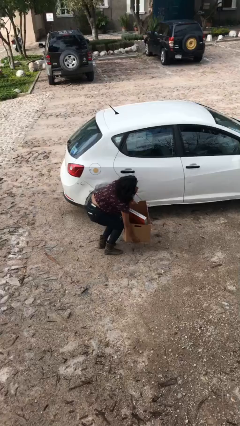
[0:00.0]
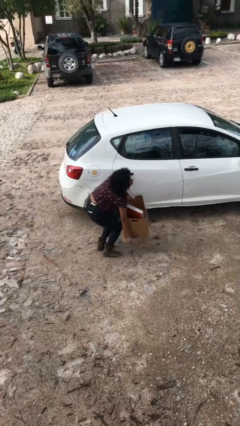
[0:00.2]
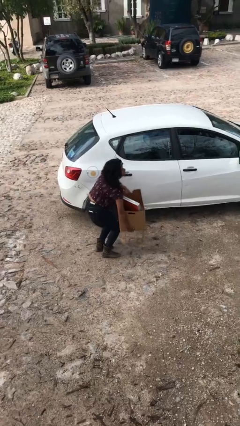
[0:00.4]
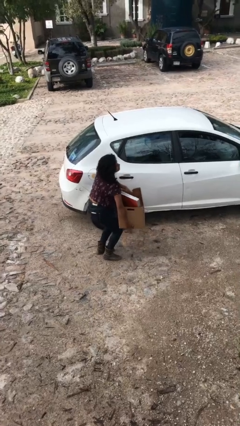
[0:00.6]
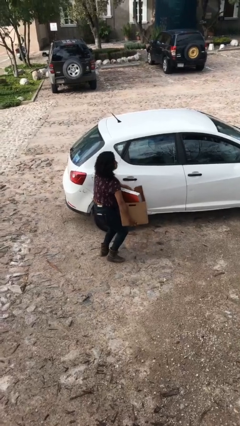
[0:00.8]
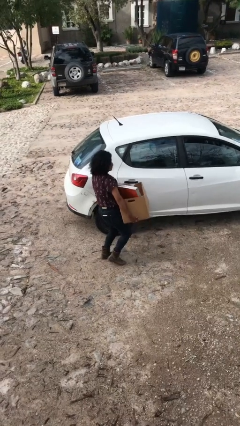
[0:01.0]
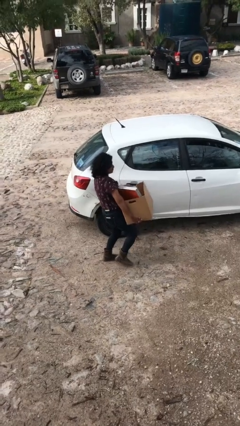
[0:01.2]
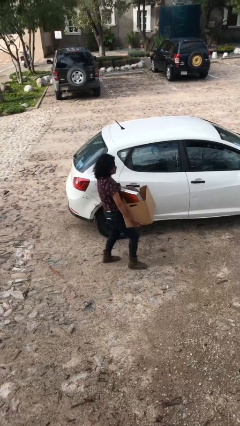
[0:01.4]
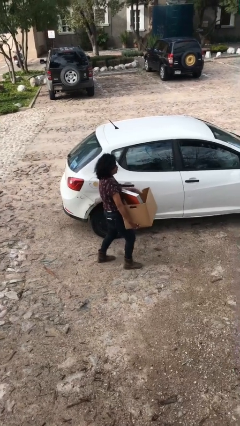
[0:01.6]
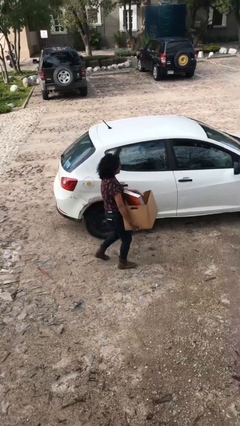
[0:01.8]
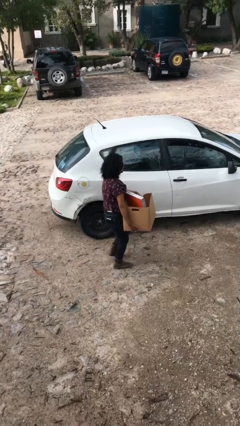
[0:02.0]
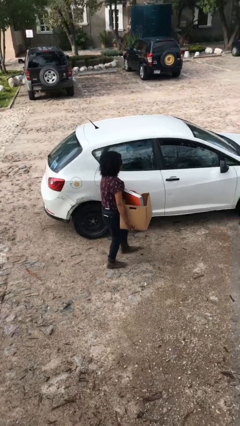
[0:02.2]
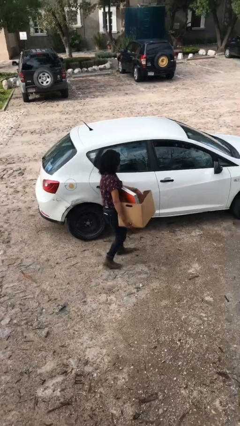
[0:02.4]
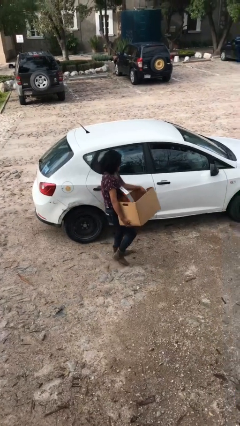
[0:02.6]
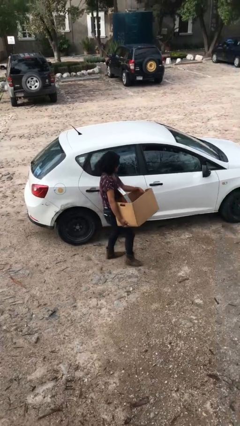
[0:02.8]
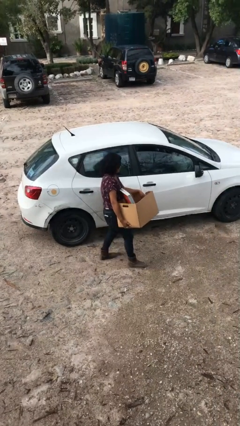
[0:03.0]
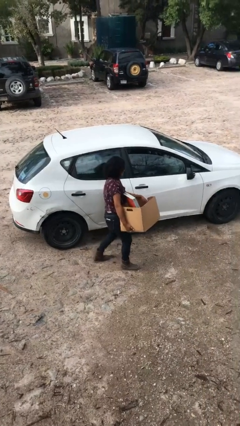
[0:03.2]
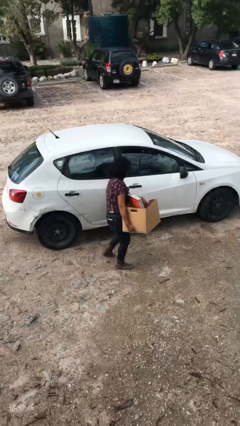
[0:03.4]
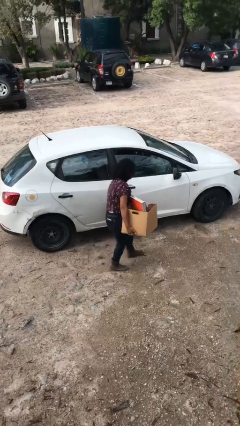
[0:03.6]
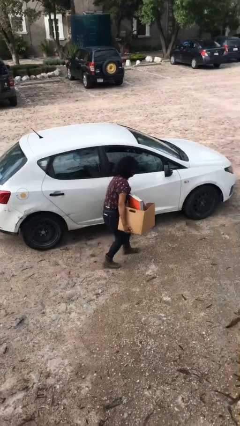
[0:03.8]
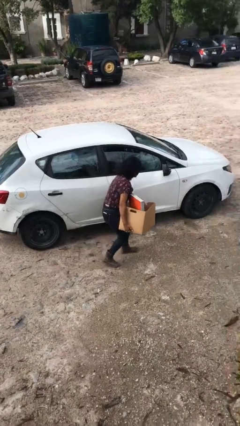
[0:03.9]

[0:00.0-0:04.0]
person carries heavy object

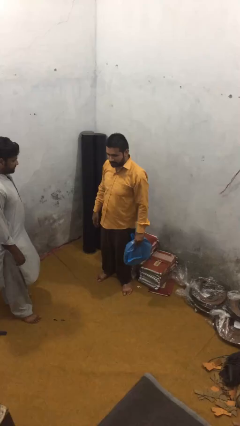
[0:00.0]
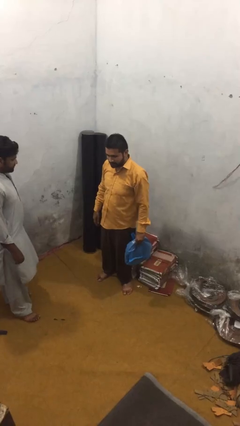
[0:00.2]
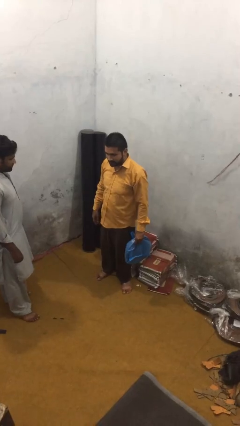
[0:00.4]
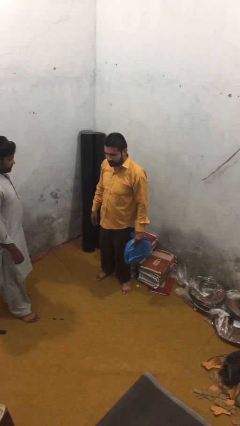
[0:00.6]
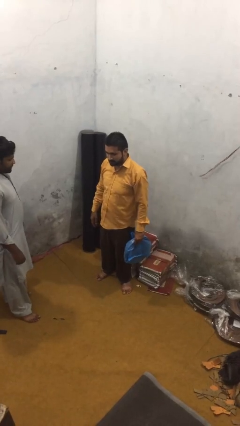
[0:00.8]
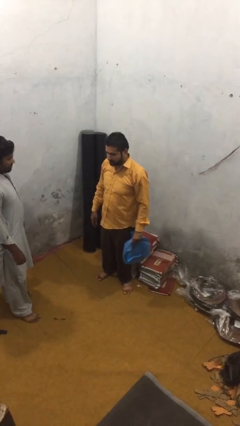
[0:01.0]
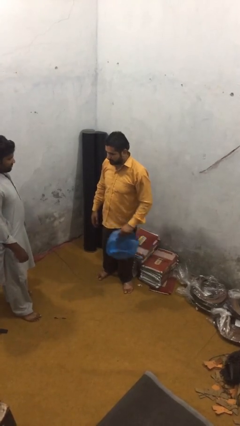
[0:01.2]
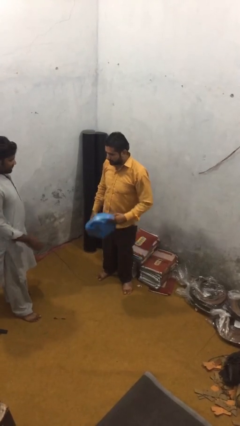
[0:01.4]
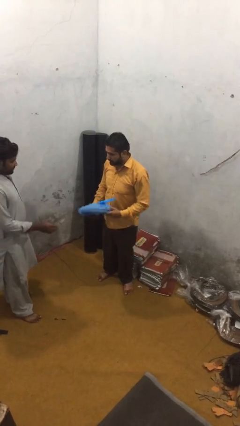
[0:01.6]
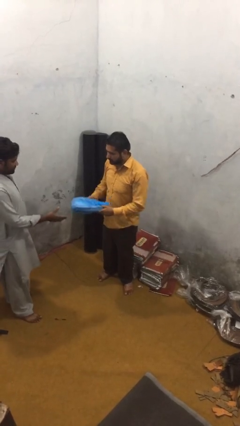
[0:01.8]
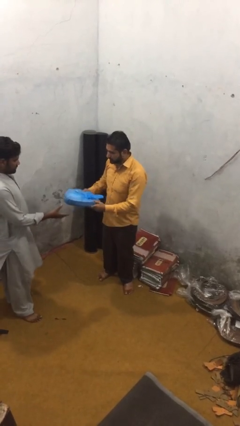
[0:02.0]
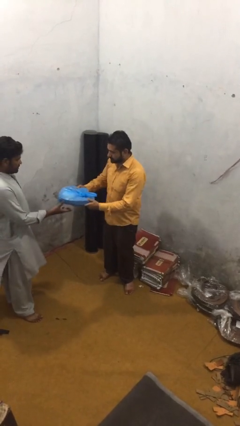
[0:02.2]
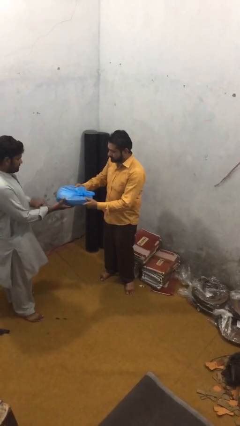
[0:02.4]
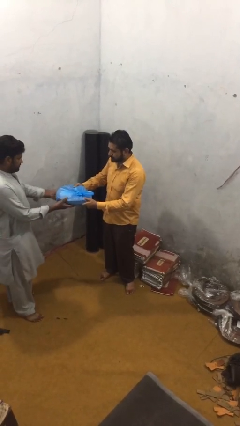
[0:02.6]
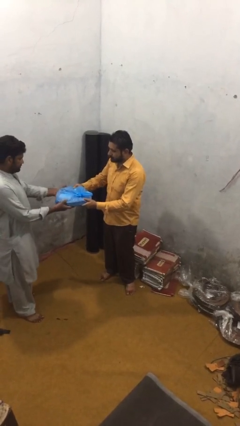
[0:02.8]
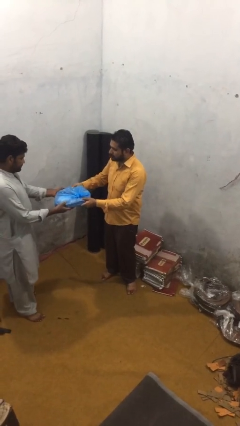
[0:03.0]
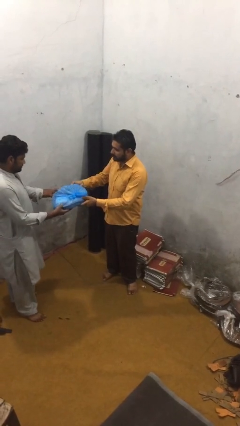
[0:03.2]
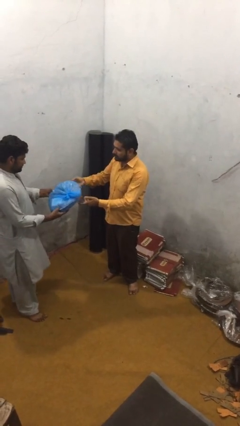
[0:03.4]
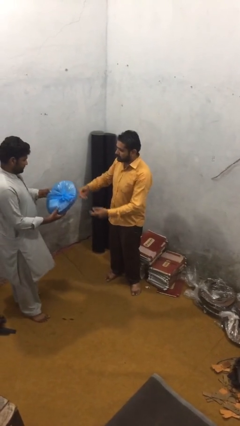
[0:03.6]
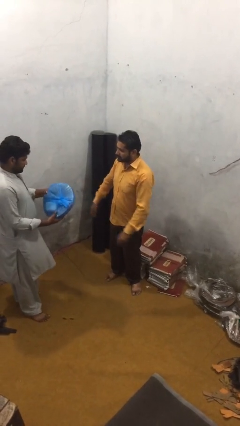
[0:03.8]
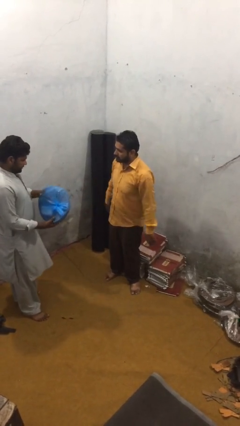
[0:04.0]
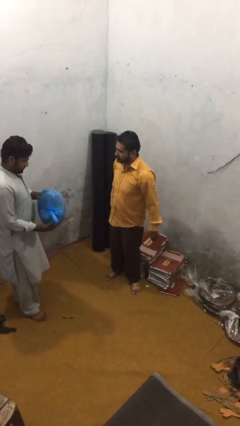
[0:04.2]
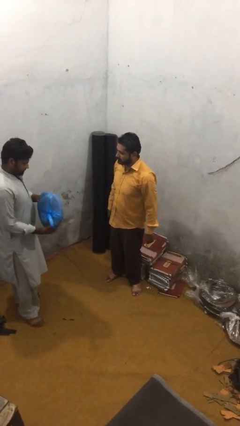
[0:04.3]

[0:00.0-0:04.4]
person transfers object to person

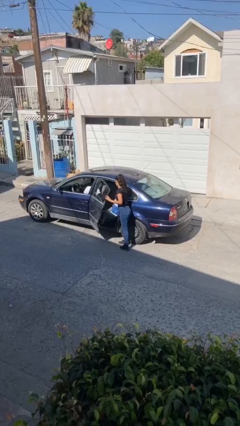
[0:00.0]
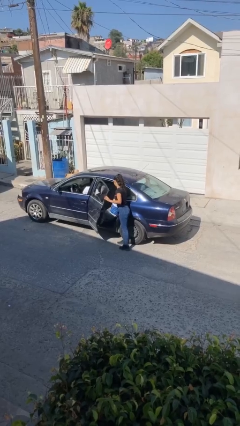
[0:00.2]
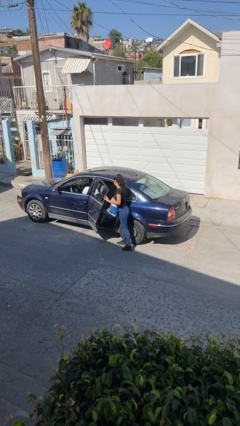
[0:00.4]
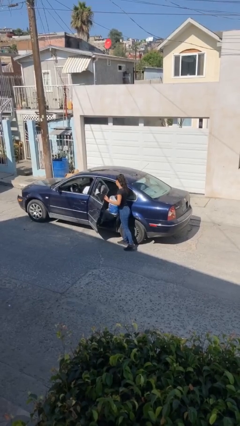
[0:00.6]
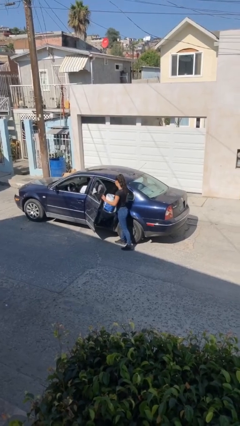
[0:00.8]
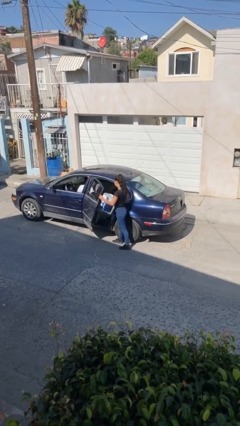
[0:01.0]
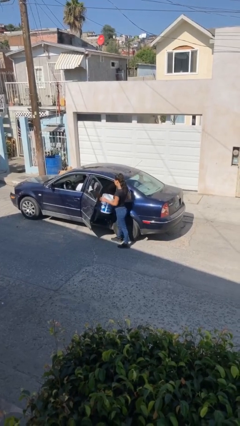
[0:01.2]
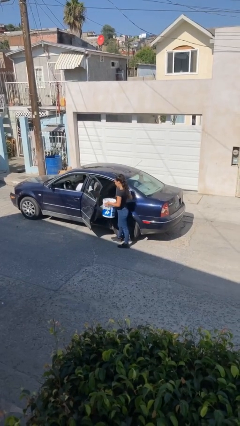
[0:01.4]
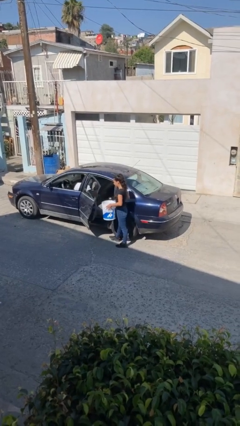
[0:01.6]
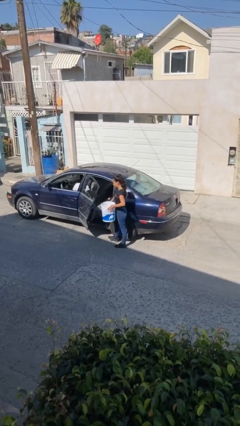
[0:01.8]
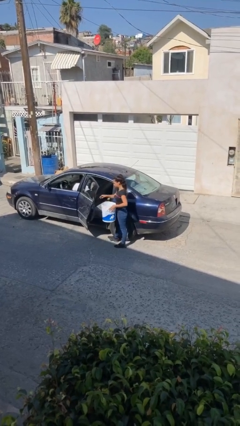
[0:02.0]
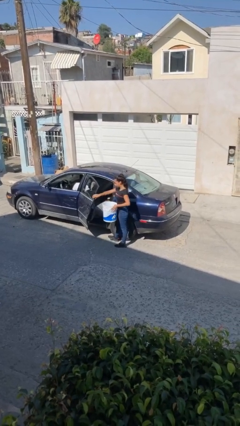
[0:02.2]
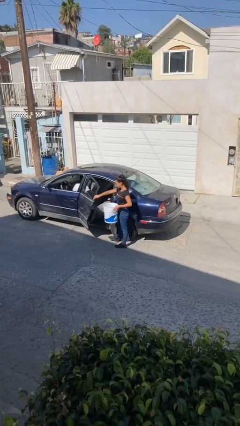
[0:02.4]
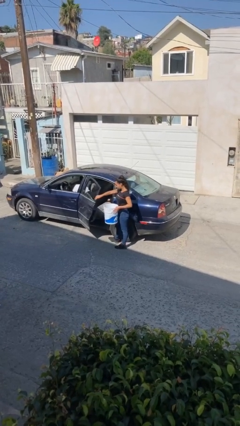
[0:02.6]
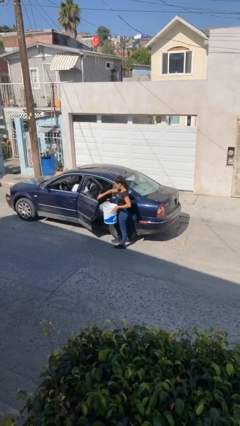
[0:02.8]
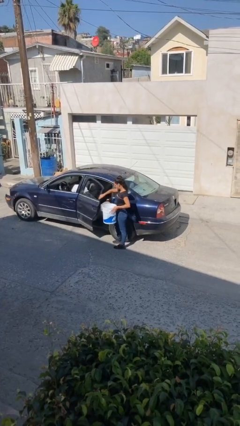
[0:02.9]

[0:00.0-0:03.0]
person unloads car

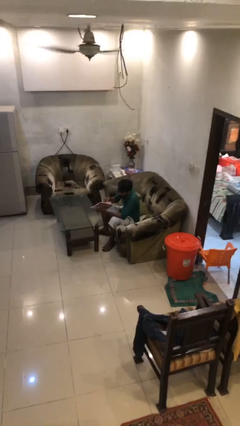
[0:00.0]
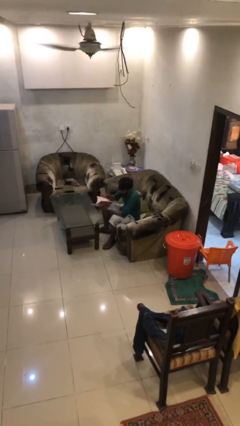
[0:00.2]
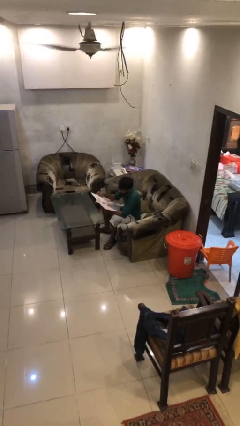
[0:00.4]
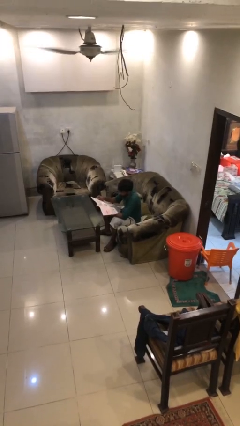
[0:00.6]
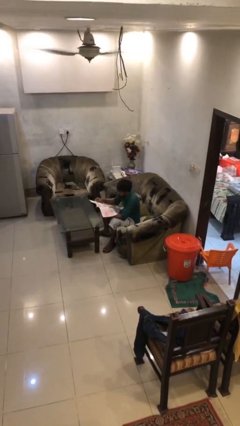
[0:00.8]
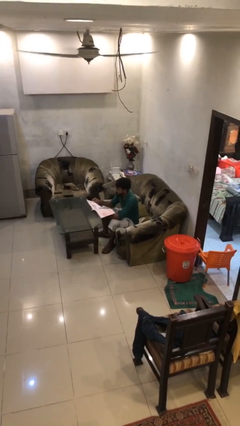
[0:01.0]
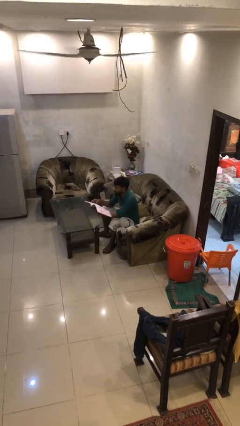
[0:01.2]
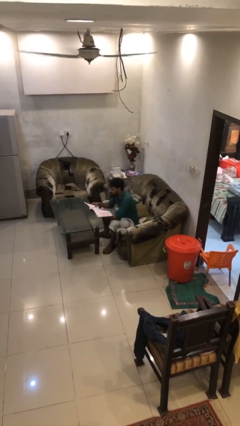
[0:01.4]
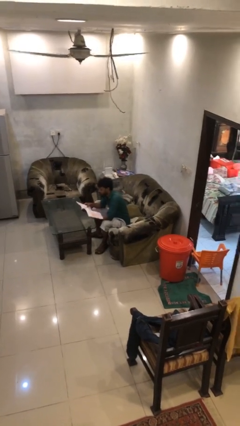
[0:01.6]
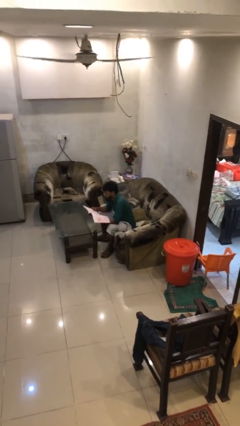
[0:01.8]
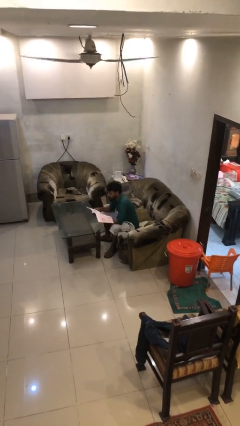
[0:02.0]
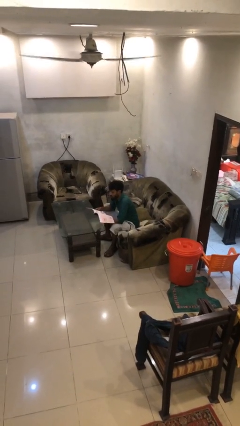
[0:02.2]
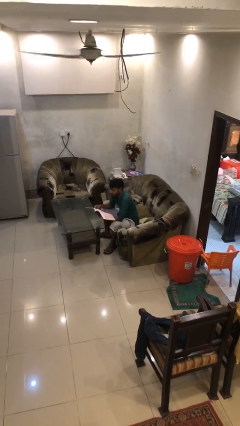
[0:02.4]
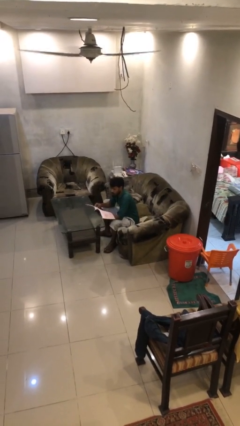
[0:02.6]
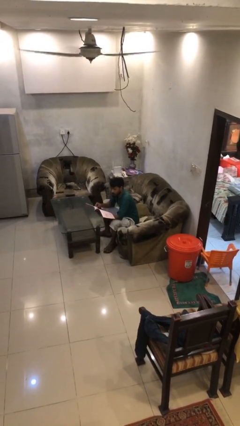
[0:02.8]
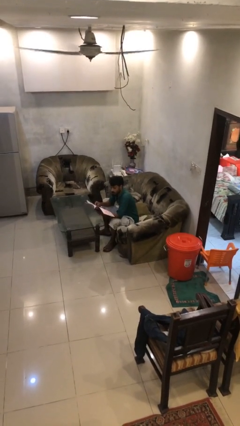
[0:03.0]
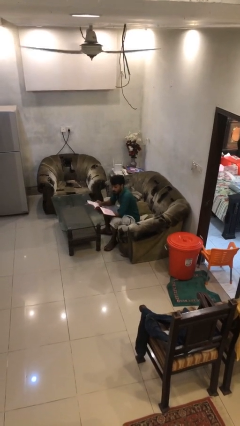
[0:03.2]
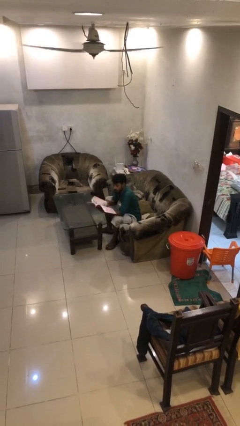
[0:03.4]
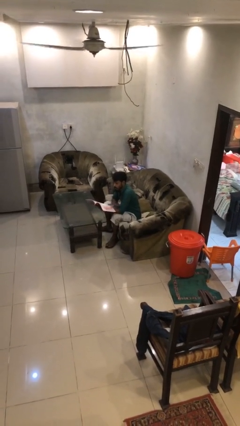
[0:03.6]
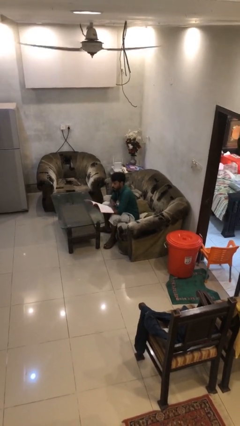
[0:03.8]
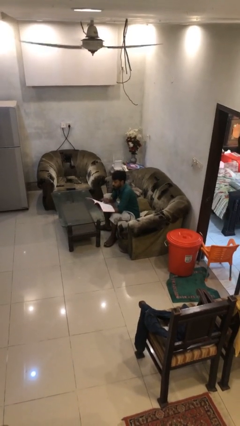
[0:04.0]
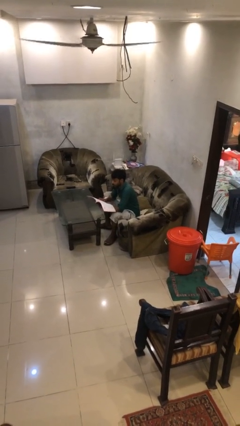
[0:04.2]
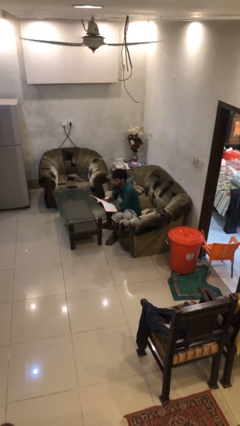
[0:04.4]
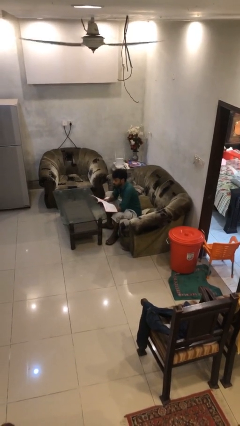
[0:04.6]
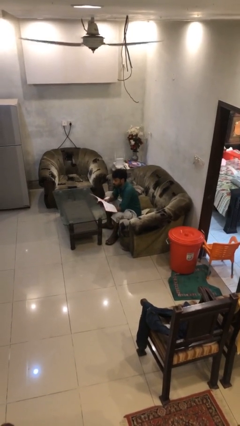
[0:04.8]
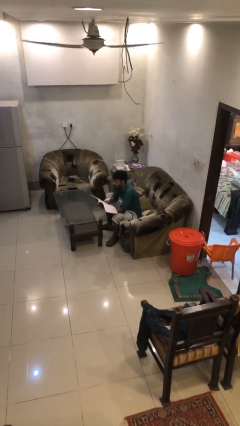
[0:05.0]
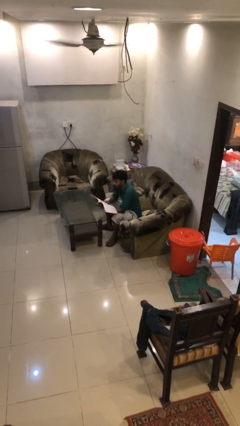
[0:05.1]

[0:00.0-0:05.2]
person reads document

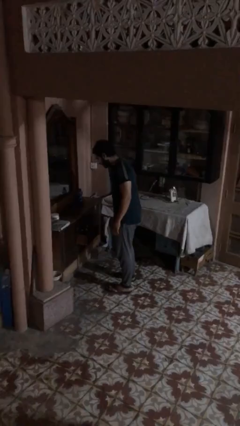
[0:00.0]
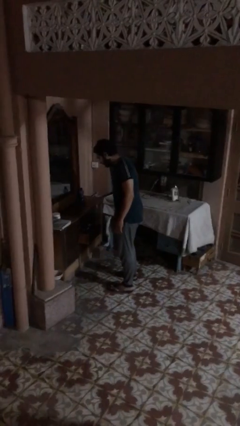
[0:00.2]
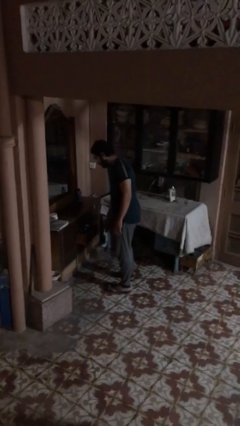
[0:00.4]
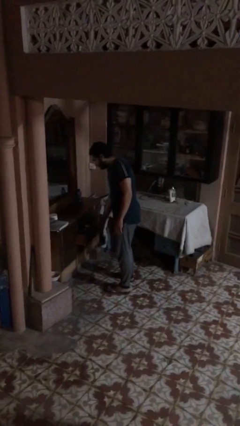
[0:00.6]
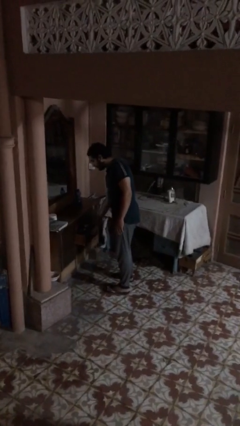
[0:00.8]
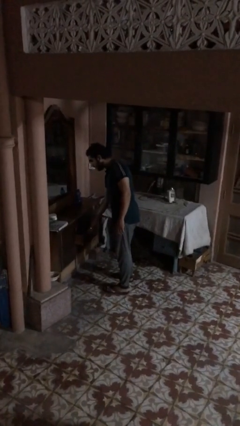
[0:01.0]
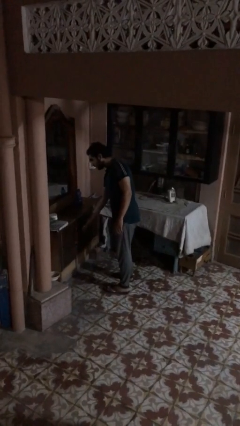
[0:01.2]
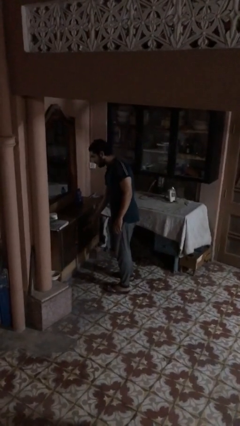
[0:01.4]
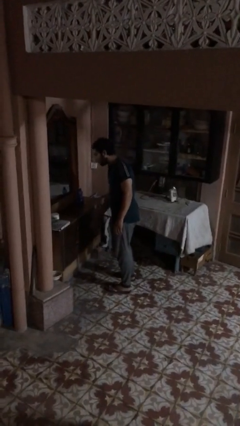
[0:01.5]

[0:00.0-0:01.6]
person closes dresser drawer
